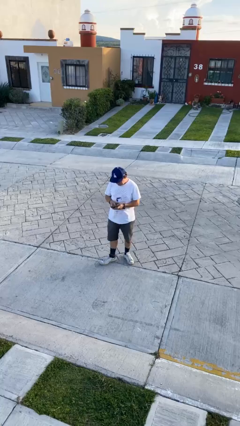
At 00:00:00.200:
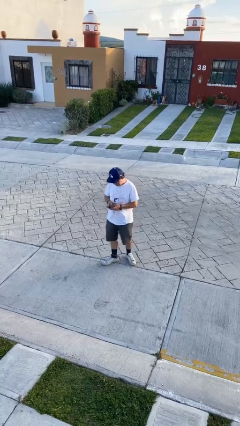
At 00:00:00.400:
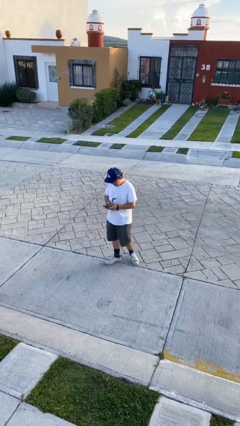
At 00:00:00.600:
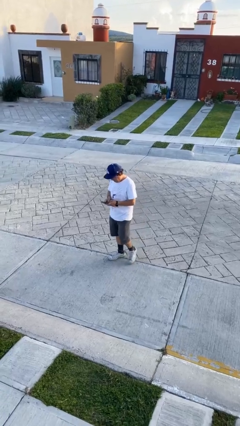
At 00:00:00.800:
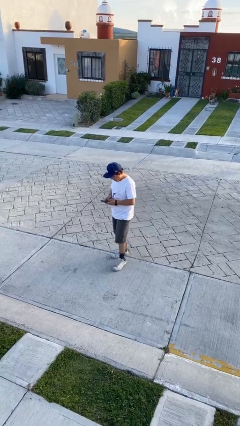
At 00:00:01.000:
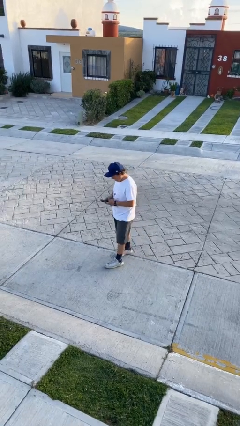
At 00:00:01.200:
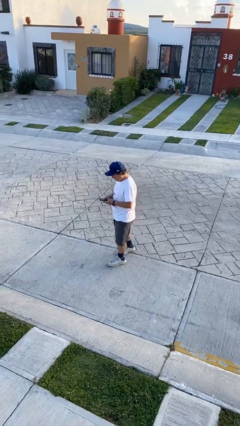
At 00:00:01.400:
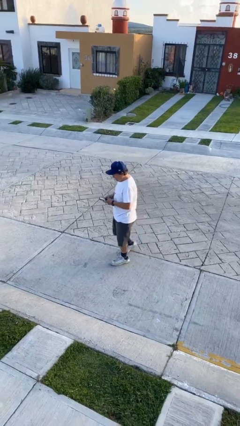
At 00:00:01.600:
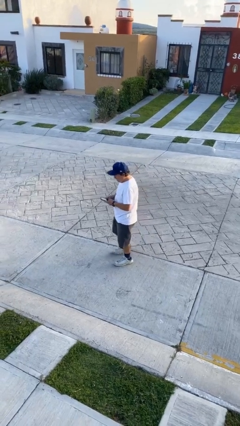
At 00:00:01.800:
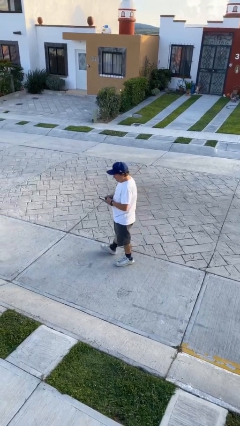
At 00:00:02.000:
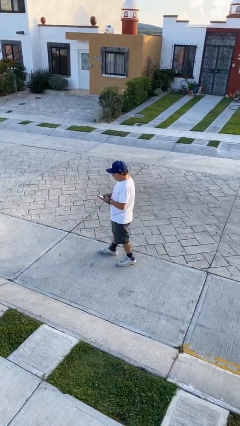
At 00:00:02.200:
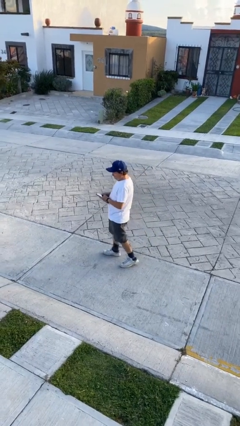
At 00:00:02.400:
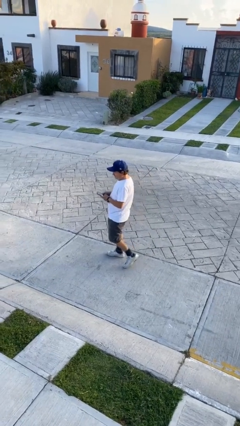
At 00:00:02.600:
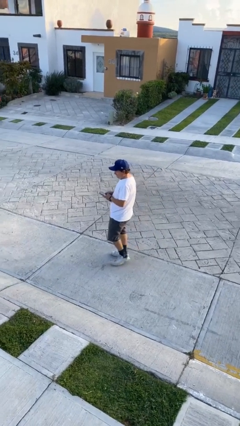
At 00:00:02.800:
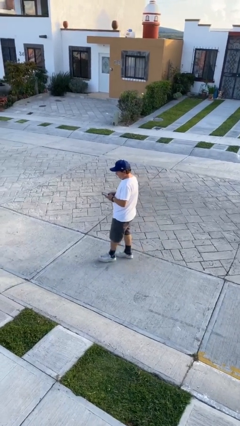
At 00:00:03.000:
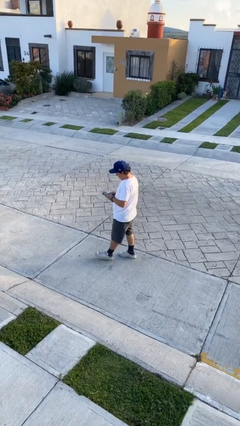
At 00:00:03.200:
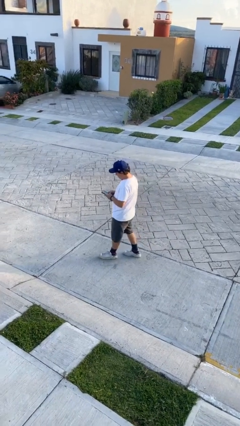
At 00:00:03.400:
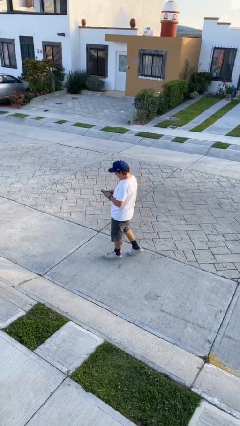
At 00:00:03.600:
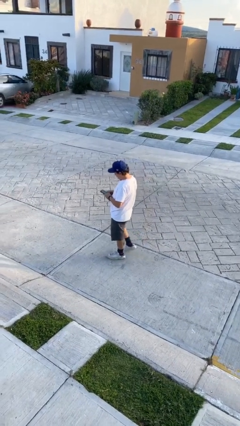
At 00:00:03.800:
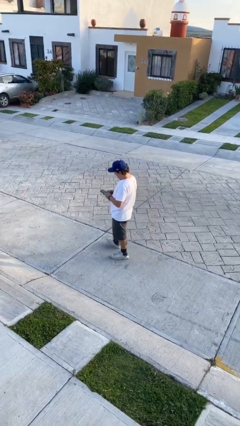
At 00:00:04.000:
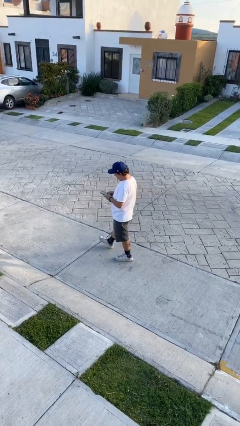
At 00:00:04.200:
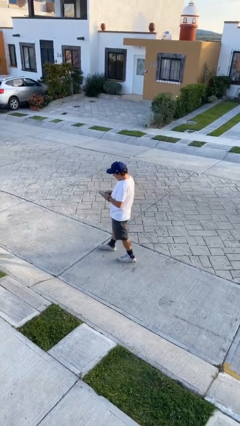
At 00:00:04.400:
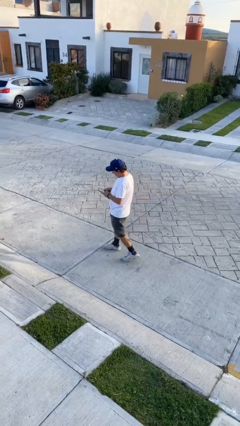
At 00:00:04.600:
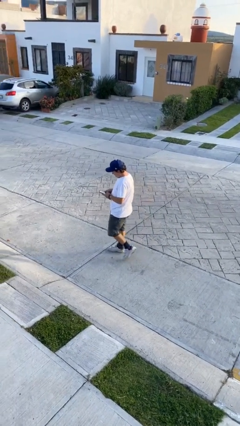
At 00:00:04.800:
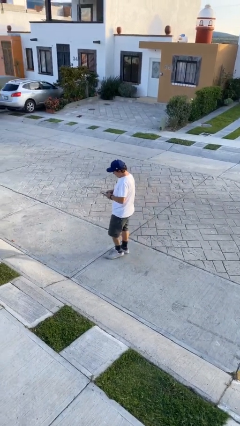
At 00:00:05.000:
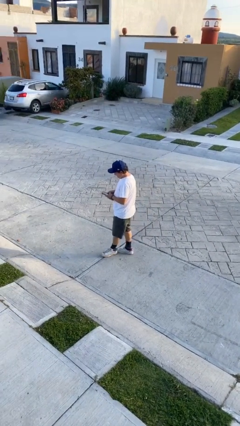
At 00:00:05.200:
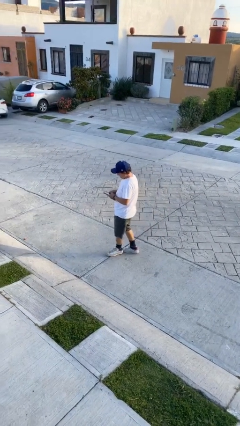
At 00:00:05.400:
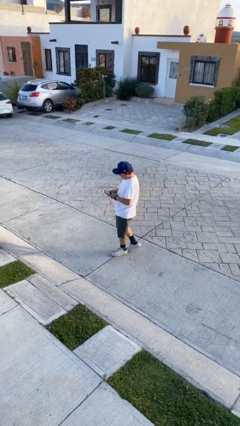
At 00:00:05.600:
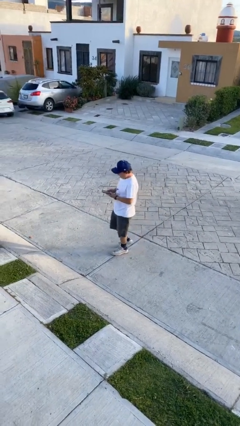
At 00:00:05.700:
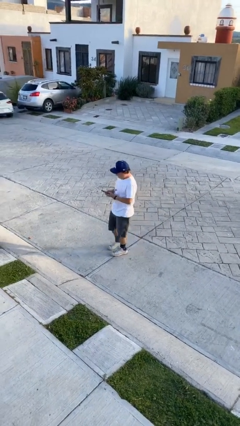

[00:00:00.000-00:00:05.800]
person texts on phone

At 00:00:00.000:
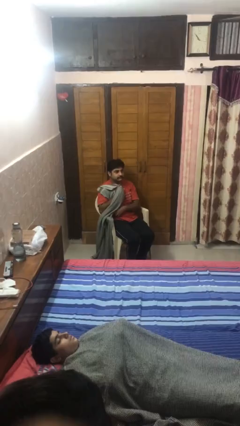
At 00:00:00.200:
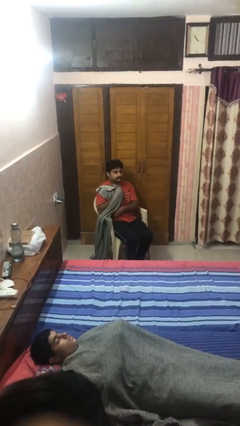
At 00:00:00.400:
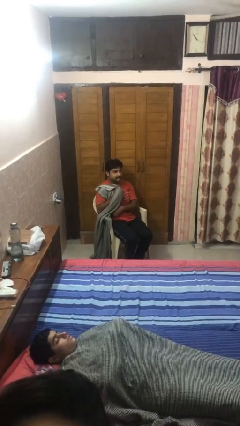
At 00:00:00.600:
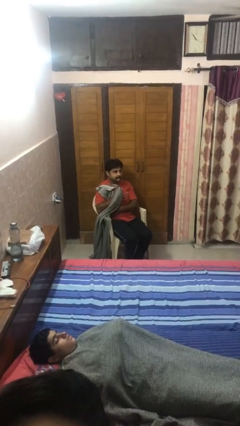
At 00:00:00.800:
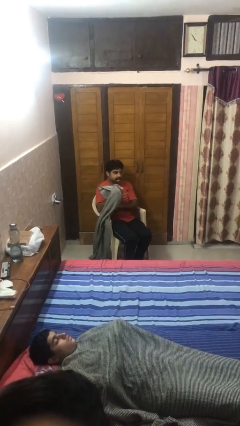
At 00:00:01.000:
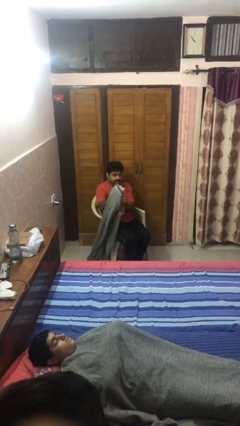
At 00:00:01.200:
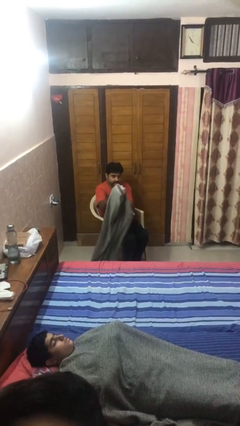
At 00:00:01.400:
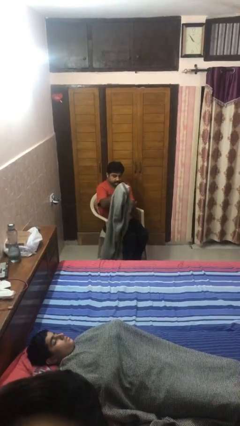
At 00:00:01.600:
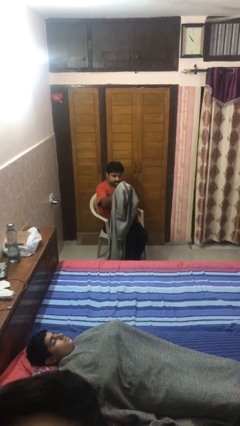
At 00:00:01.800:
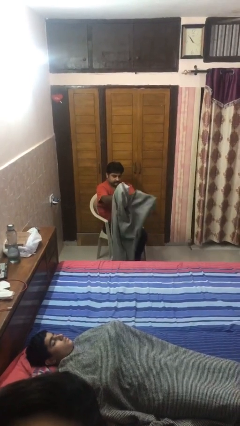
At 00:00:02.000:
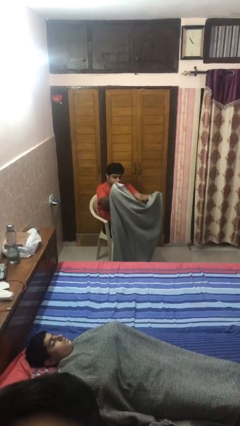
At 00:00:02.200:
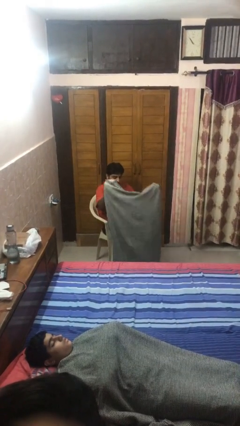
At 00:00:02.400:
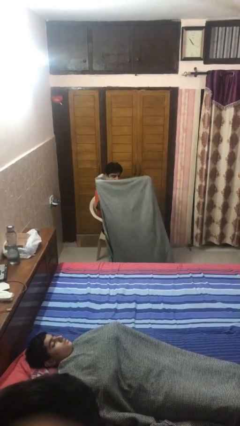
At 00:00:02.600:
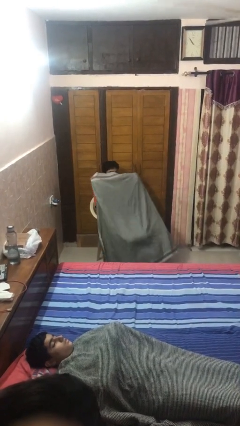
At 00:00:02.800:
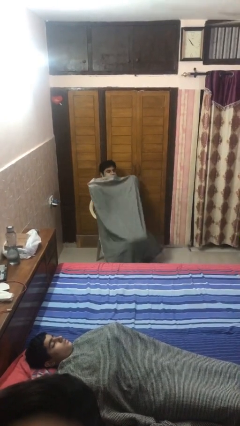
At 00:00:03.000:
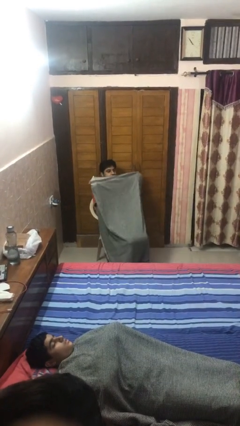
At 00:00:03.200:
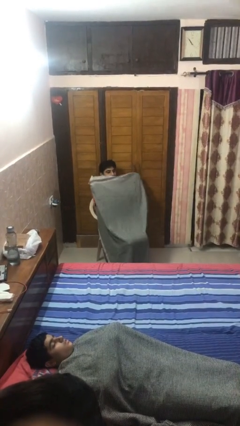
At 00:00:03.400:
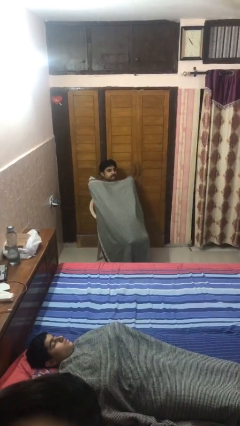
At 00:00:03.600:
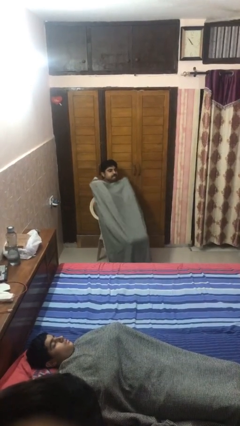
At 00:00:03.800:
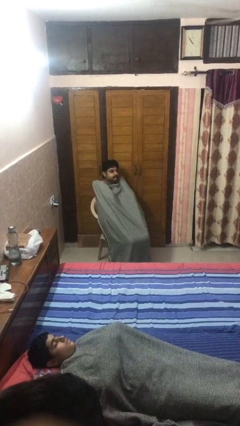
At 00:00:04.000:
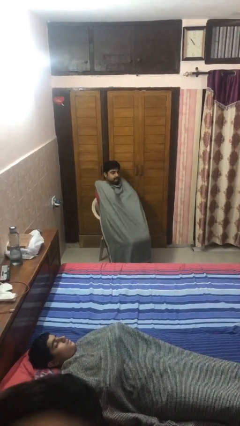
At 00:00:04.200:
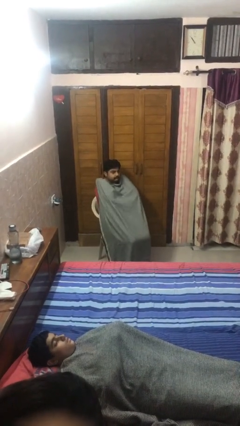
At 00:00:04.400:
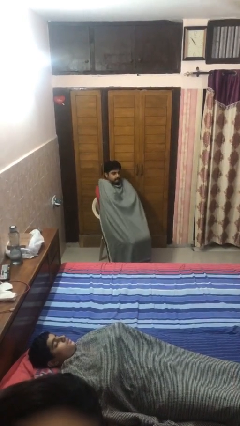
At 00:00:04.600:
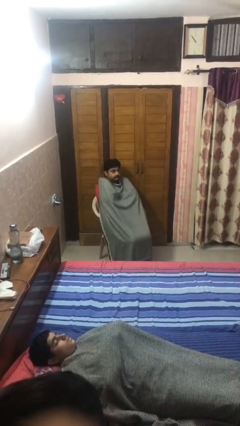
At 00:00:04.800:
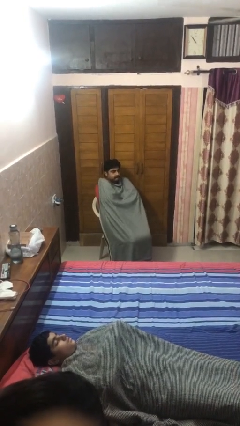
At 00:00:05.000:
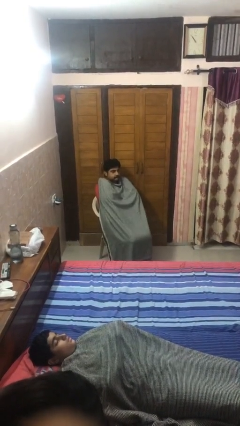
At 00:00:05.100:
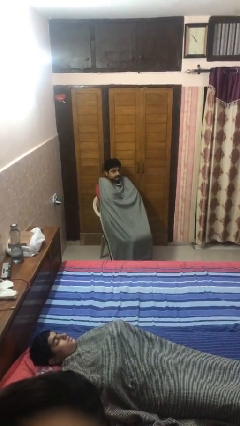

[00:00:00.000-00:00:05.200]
person covers with blanket

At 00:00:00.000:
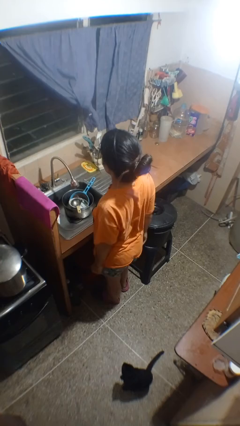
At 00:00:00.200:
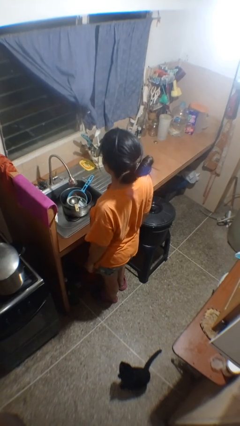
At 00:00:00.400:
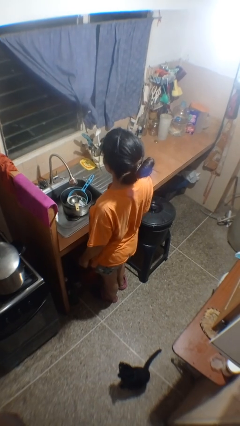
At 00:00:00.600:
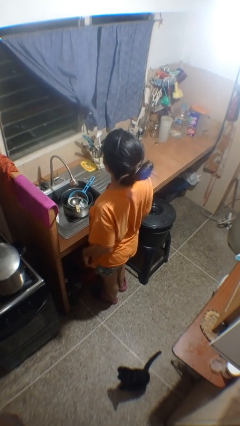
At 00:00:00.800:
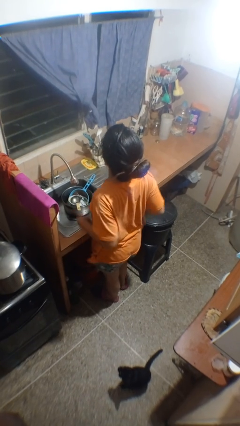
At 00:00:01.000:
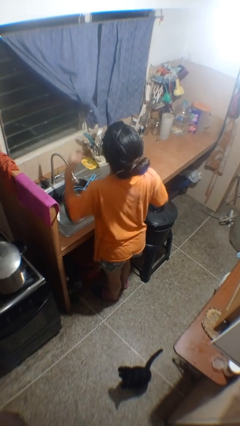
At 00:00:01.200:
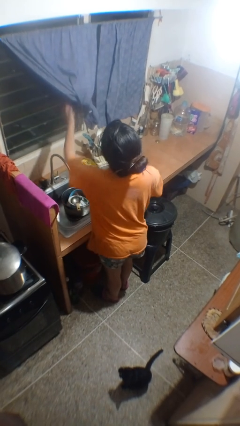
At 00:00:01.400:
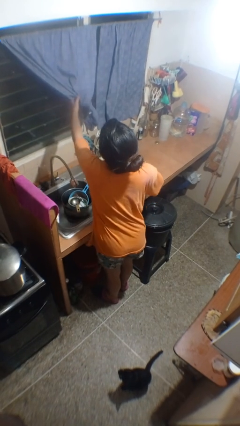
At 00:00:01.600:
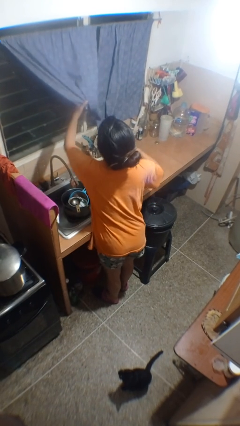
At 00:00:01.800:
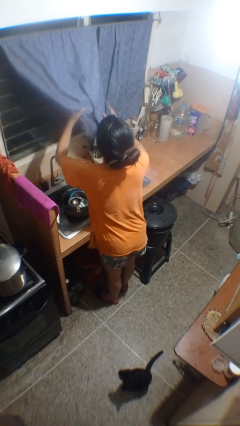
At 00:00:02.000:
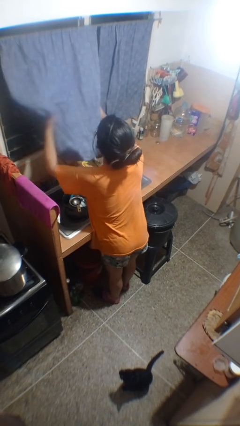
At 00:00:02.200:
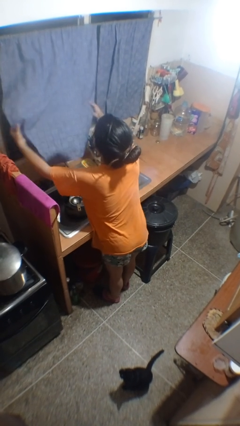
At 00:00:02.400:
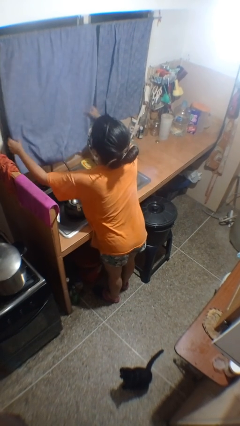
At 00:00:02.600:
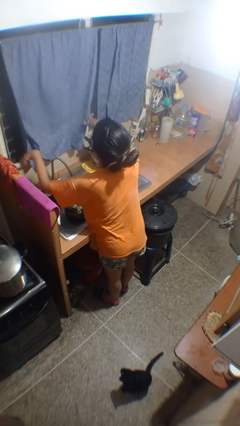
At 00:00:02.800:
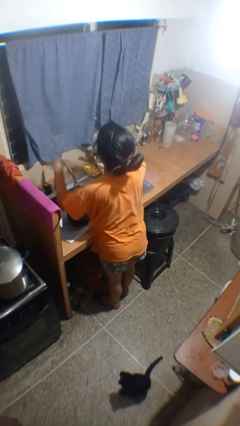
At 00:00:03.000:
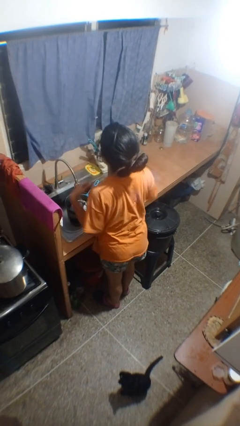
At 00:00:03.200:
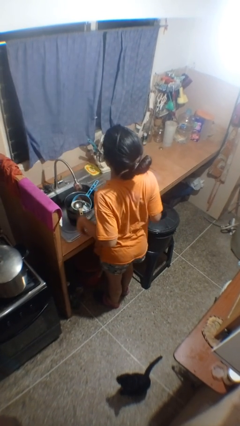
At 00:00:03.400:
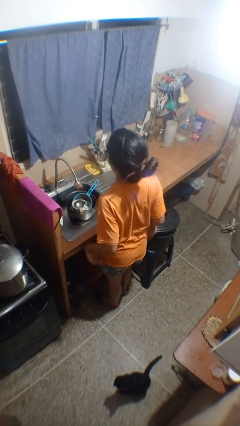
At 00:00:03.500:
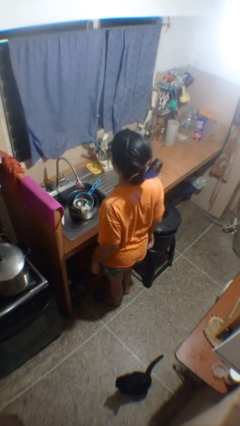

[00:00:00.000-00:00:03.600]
person closes curtains

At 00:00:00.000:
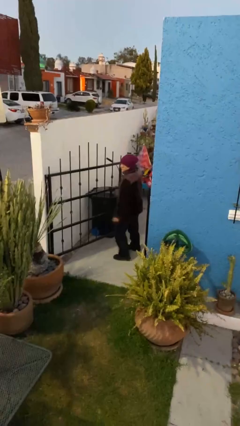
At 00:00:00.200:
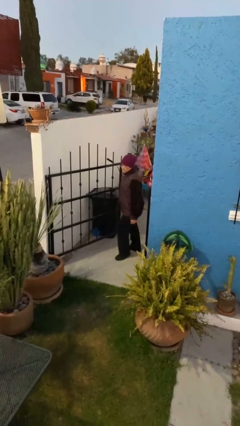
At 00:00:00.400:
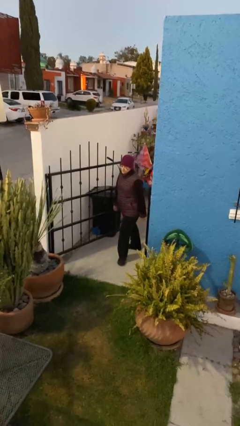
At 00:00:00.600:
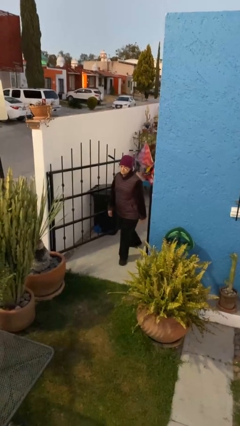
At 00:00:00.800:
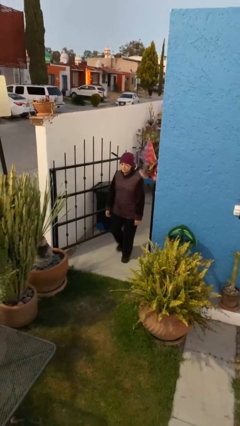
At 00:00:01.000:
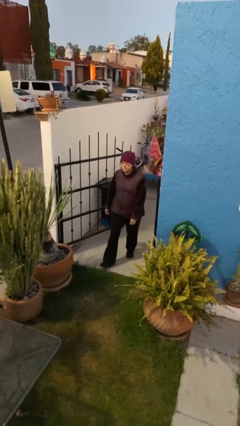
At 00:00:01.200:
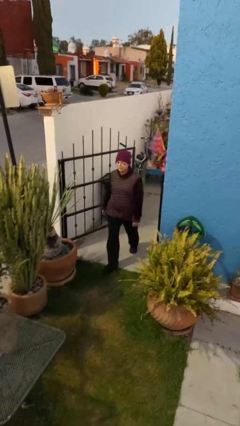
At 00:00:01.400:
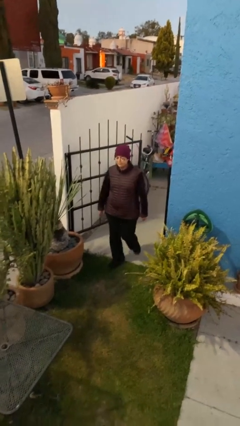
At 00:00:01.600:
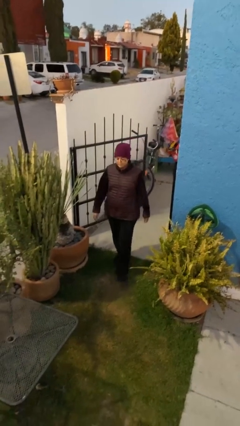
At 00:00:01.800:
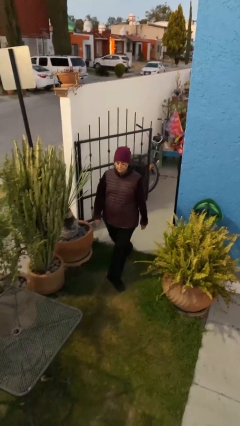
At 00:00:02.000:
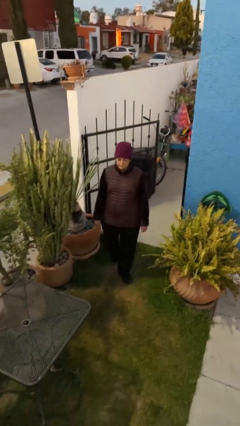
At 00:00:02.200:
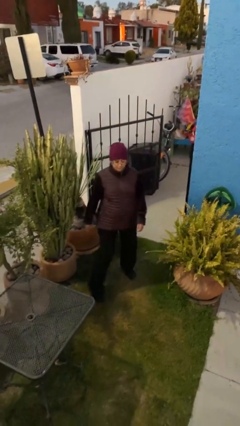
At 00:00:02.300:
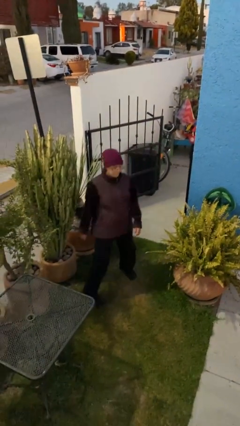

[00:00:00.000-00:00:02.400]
person exits scene through structure

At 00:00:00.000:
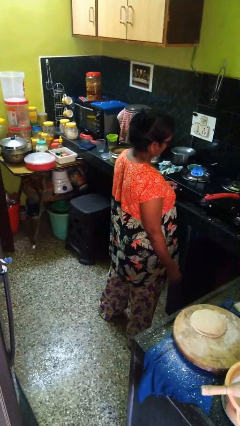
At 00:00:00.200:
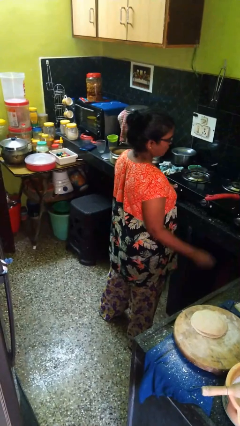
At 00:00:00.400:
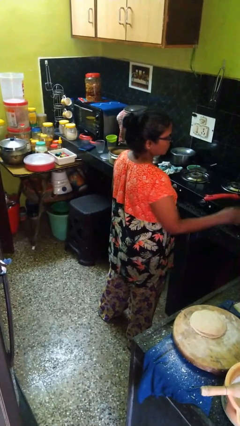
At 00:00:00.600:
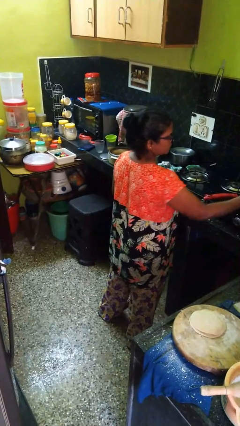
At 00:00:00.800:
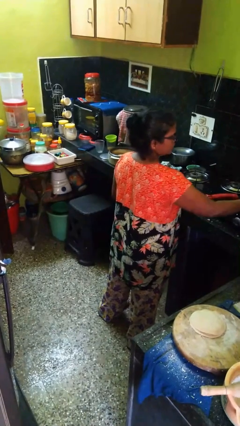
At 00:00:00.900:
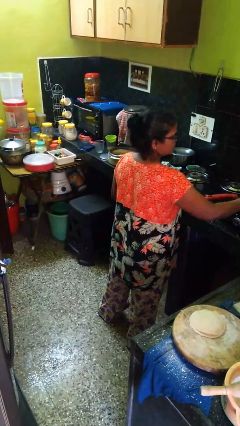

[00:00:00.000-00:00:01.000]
person turns off stovetop
